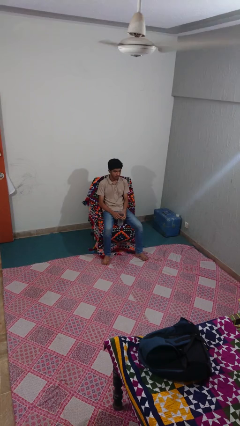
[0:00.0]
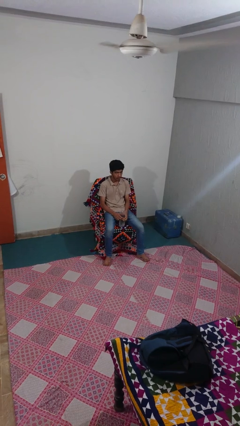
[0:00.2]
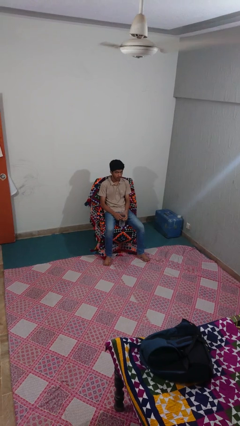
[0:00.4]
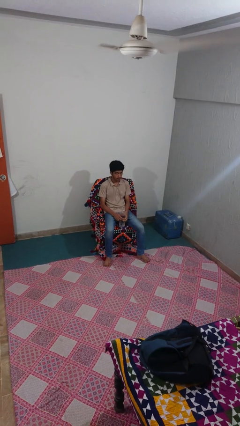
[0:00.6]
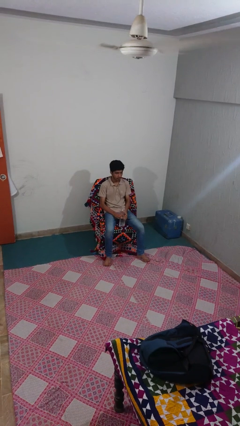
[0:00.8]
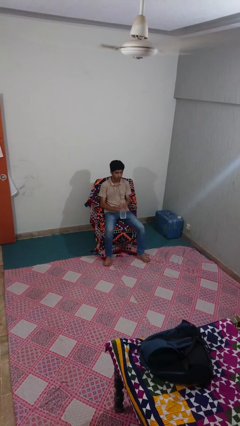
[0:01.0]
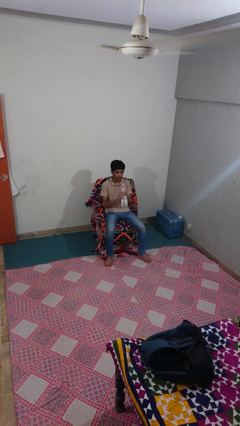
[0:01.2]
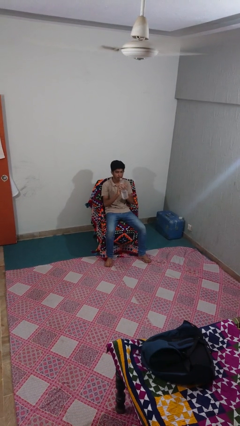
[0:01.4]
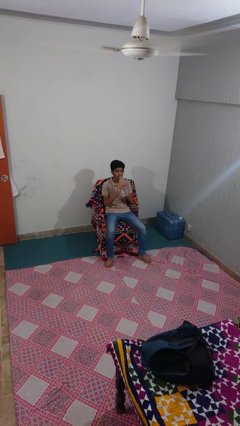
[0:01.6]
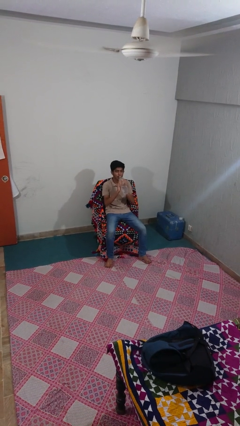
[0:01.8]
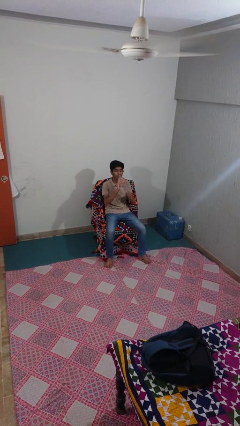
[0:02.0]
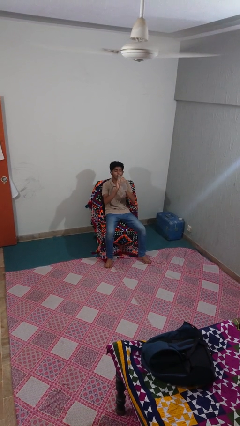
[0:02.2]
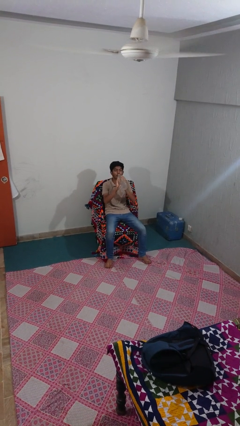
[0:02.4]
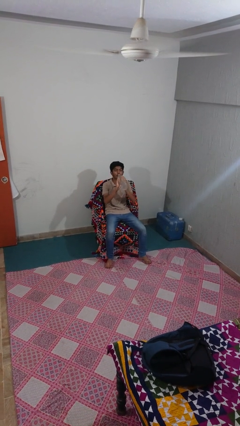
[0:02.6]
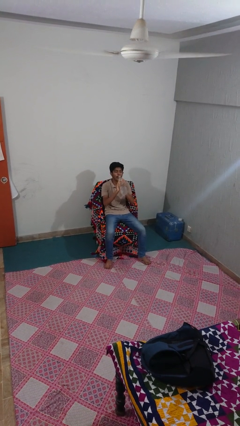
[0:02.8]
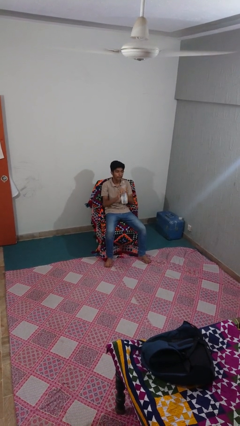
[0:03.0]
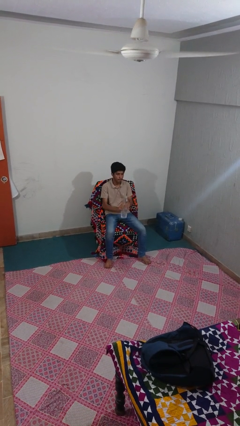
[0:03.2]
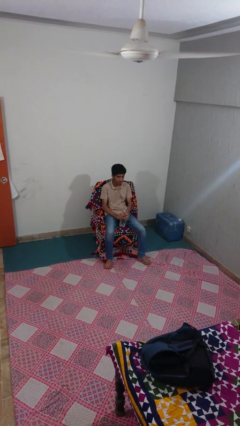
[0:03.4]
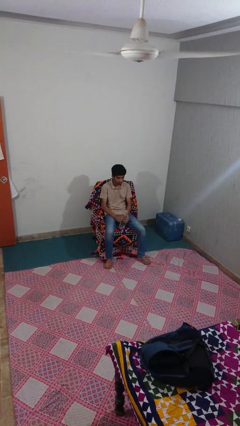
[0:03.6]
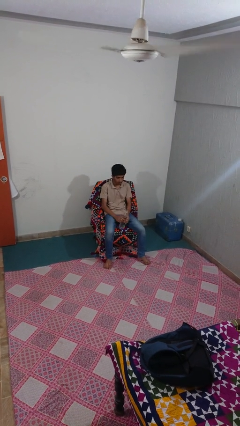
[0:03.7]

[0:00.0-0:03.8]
person drinks from bottle

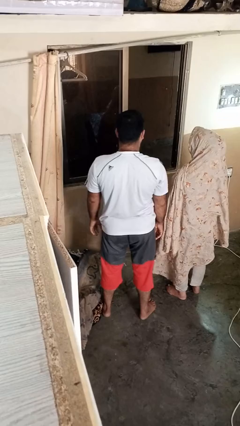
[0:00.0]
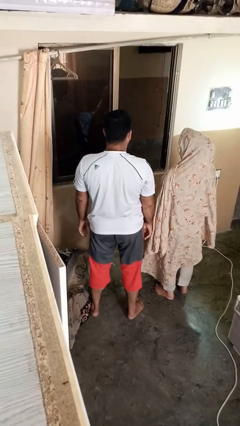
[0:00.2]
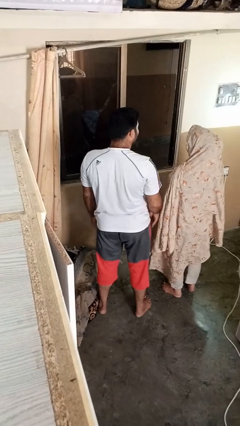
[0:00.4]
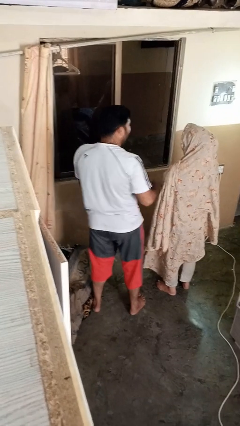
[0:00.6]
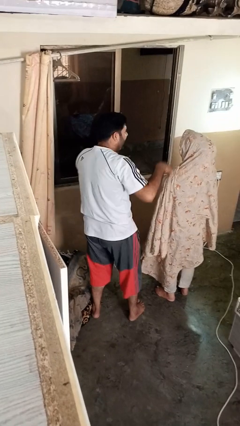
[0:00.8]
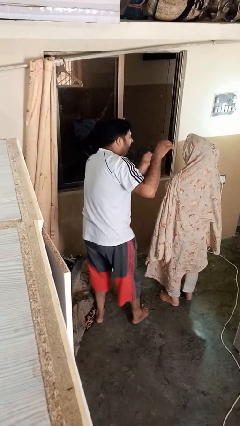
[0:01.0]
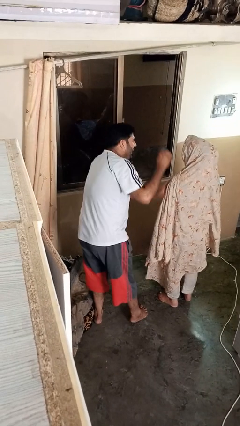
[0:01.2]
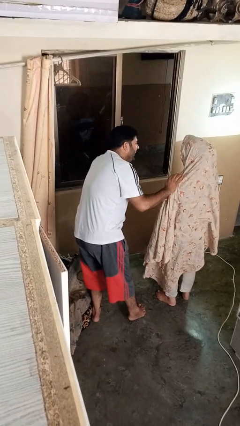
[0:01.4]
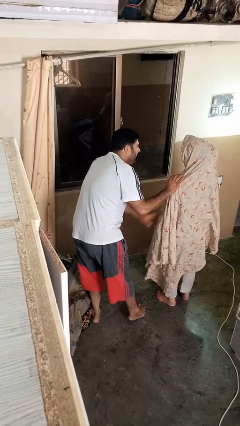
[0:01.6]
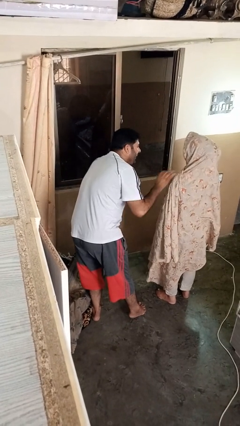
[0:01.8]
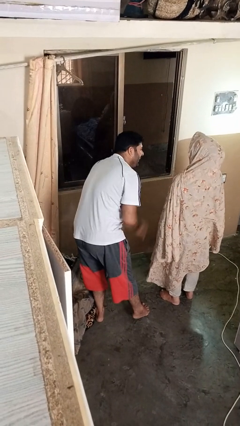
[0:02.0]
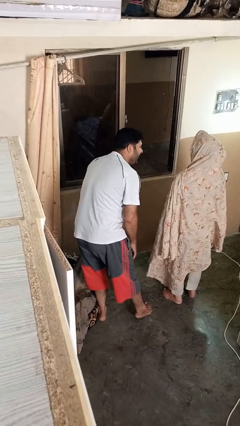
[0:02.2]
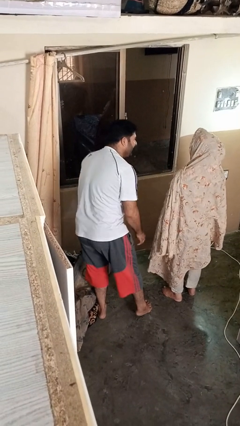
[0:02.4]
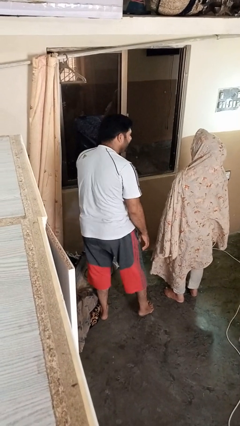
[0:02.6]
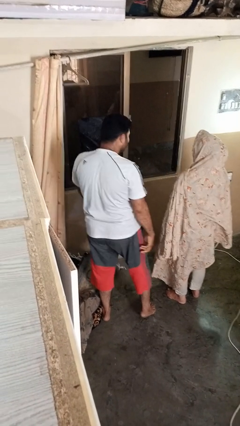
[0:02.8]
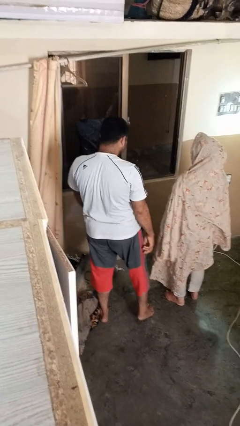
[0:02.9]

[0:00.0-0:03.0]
person laughs with person

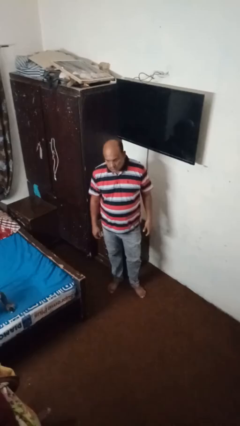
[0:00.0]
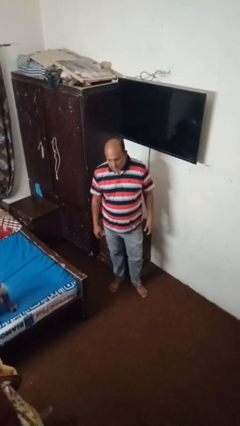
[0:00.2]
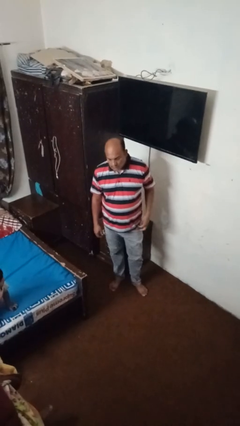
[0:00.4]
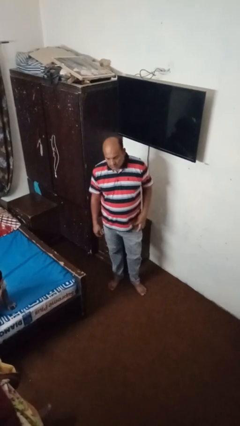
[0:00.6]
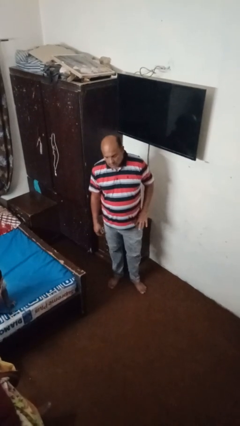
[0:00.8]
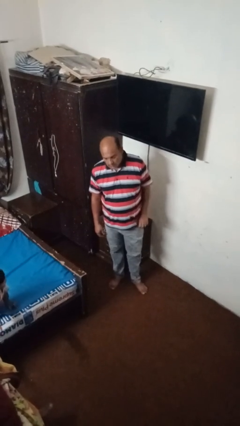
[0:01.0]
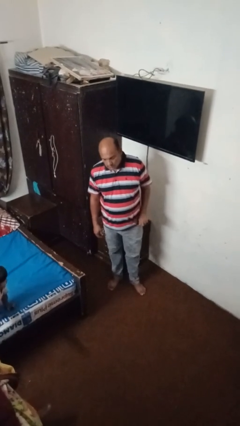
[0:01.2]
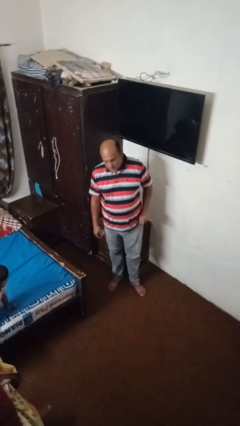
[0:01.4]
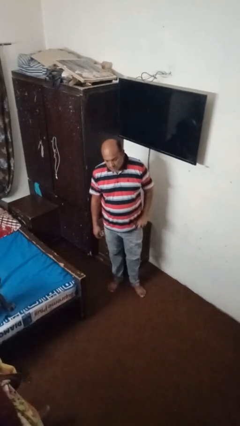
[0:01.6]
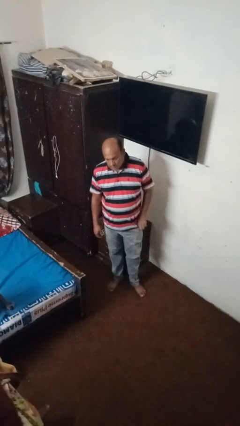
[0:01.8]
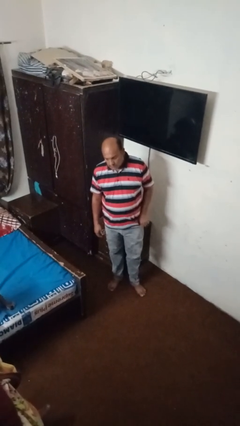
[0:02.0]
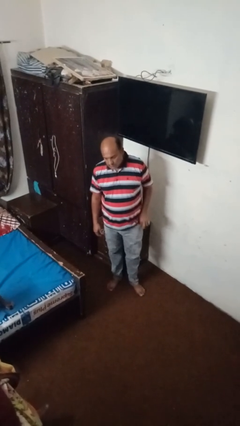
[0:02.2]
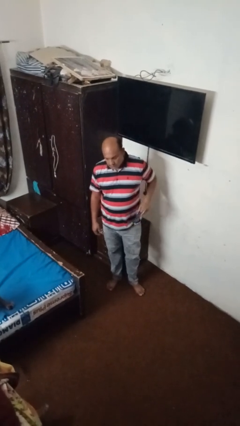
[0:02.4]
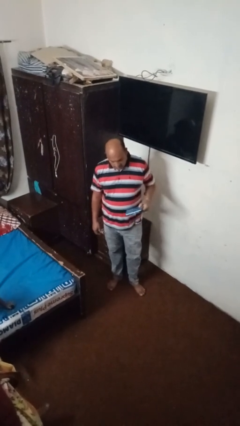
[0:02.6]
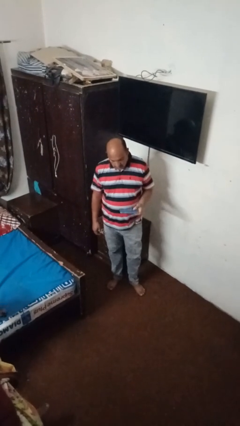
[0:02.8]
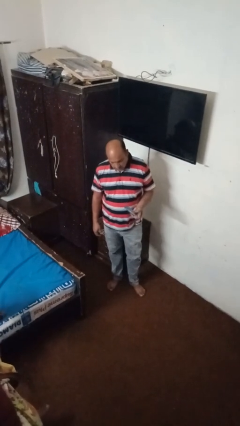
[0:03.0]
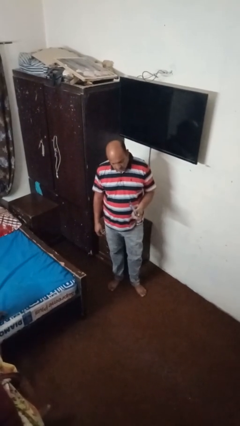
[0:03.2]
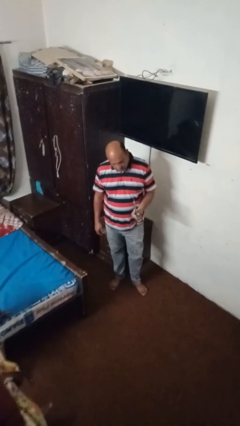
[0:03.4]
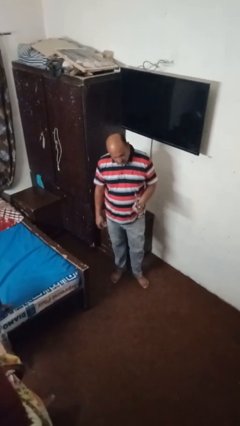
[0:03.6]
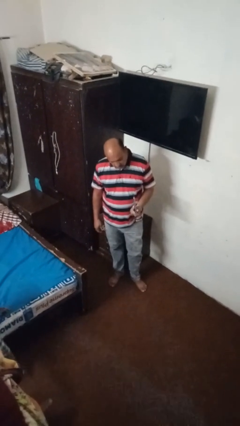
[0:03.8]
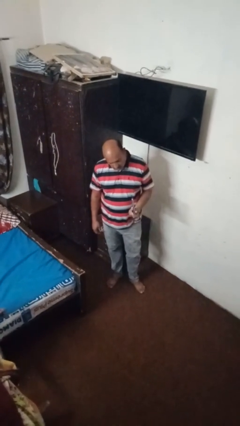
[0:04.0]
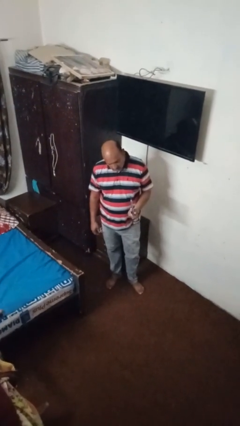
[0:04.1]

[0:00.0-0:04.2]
person takes phone from pocket

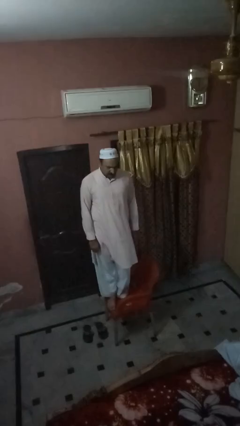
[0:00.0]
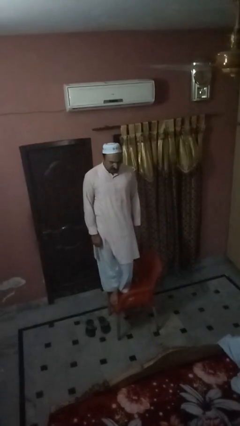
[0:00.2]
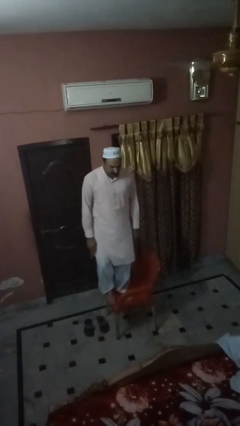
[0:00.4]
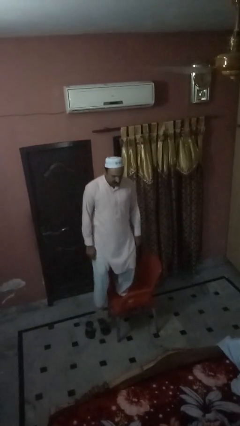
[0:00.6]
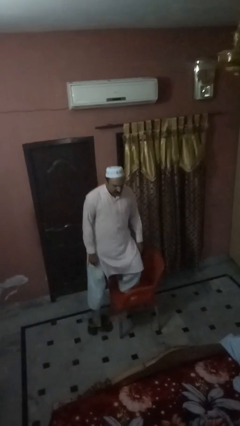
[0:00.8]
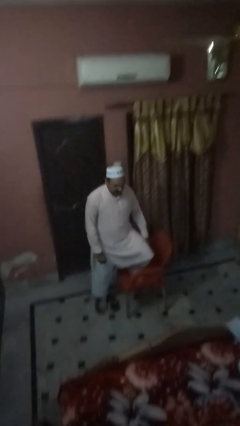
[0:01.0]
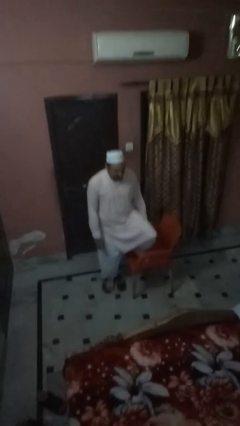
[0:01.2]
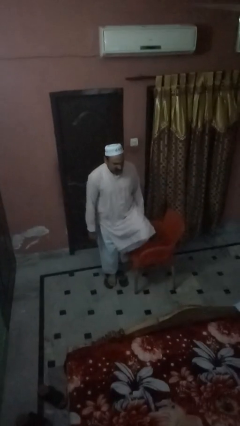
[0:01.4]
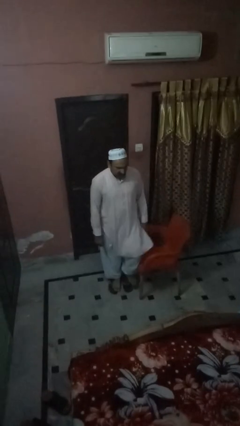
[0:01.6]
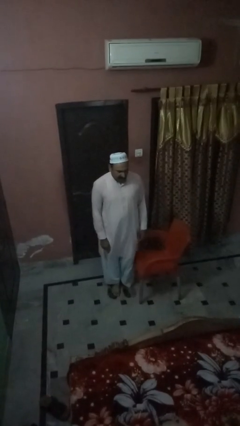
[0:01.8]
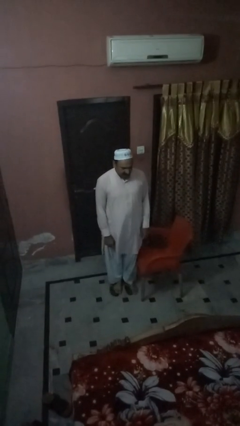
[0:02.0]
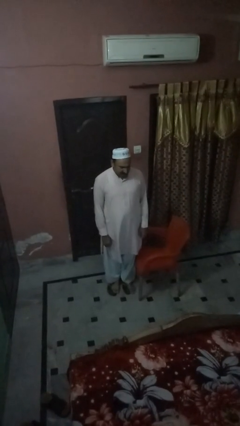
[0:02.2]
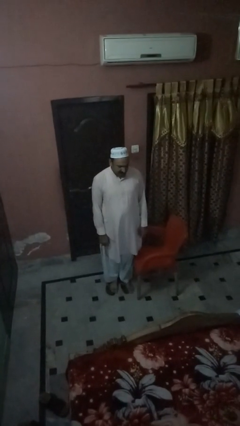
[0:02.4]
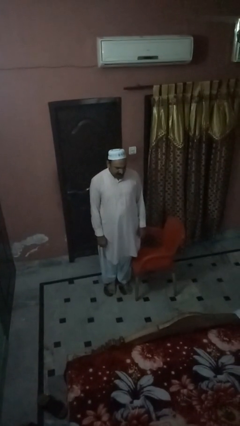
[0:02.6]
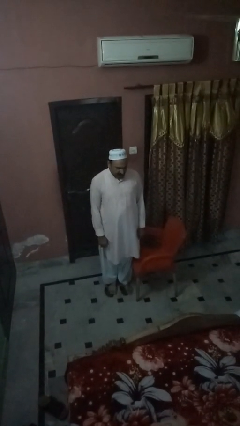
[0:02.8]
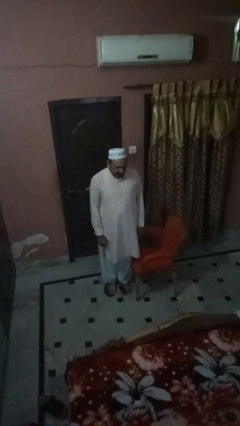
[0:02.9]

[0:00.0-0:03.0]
person climbs off chair

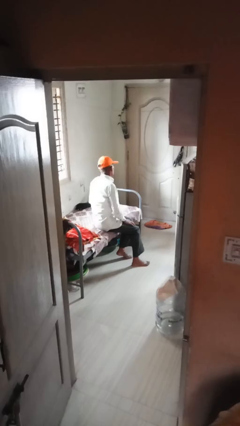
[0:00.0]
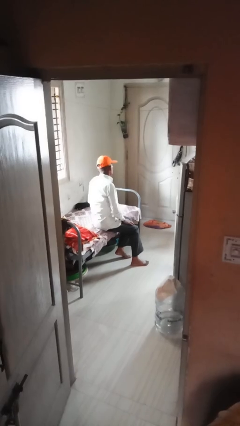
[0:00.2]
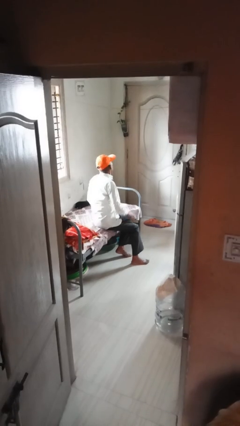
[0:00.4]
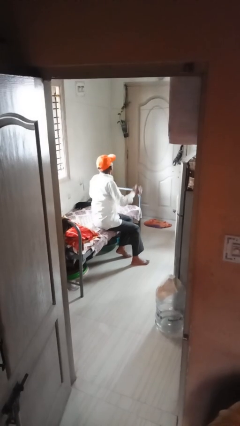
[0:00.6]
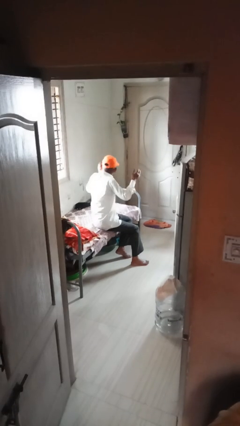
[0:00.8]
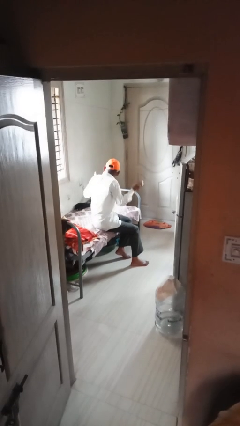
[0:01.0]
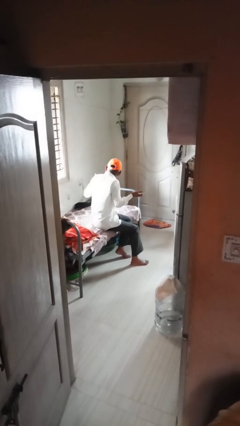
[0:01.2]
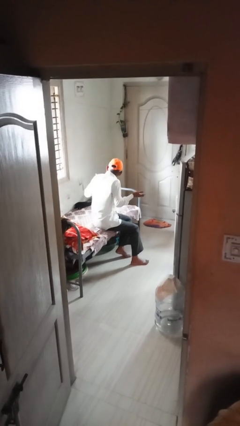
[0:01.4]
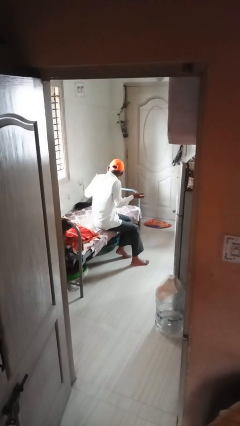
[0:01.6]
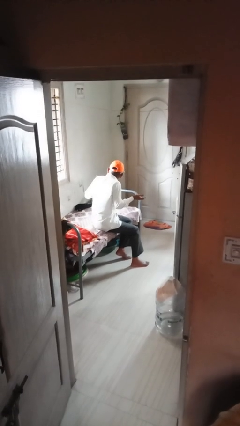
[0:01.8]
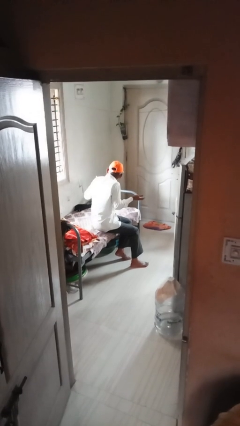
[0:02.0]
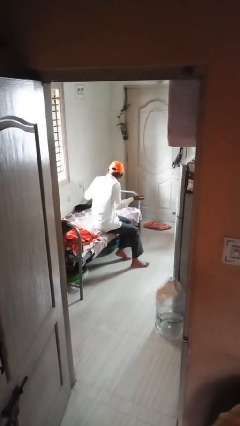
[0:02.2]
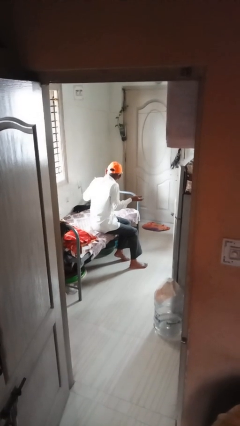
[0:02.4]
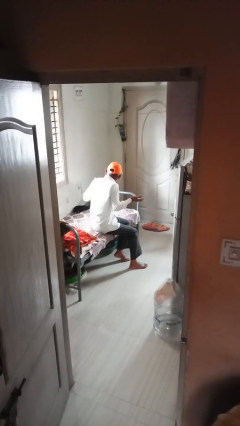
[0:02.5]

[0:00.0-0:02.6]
person shrugs

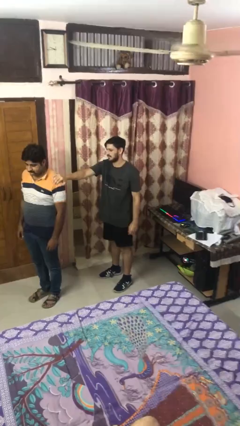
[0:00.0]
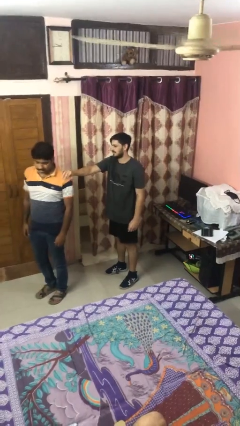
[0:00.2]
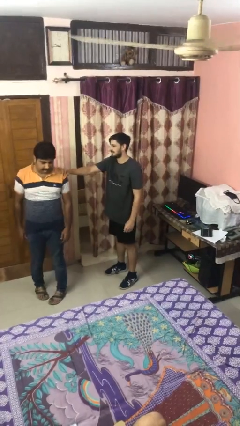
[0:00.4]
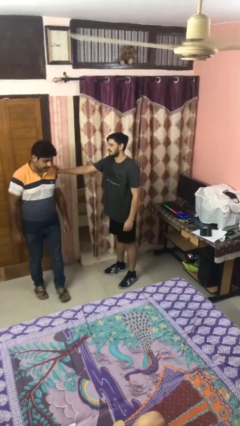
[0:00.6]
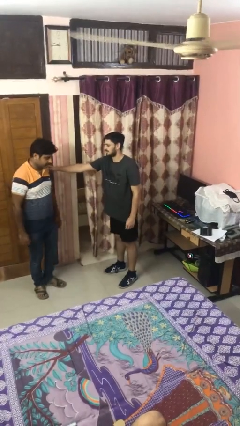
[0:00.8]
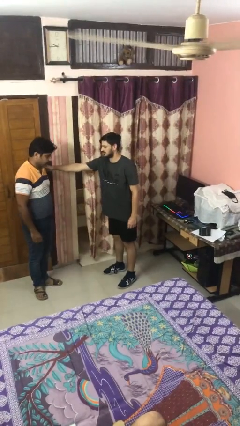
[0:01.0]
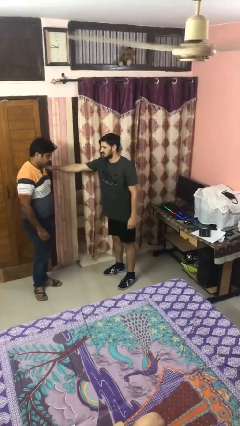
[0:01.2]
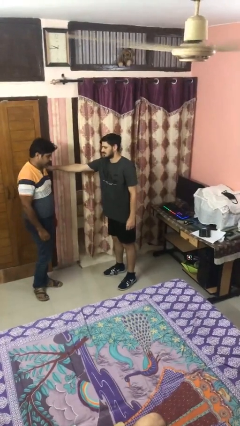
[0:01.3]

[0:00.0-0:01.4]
person spins person around
